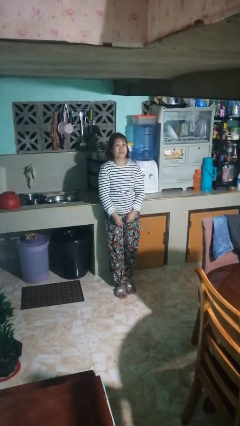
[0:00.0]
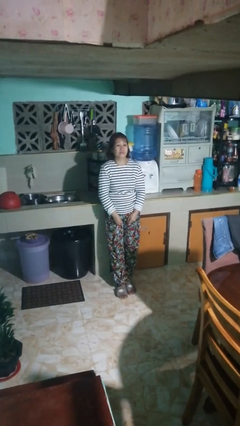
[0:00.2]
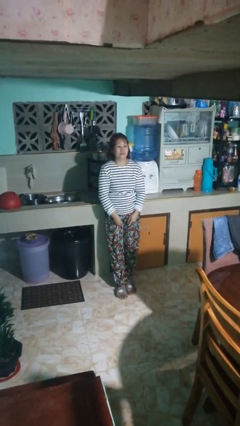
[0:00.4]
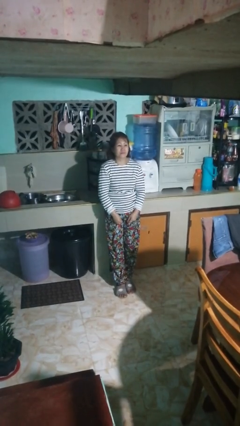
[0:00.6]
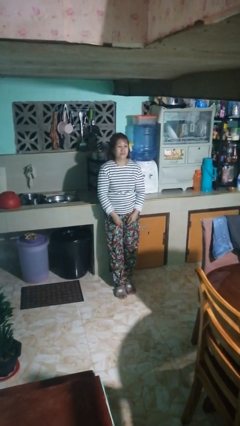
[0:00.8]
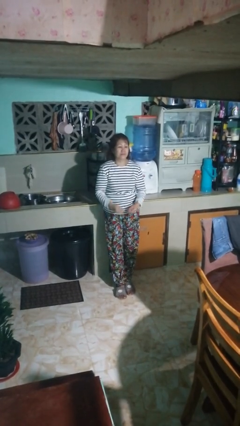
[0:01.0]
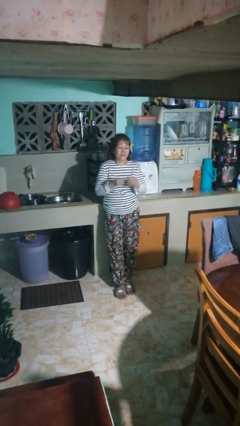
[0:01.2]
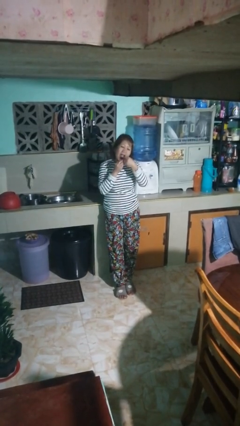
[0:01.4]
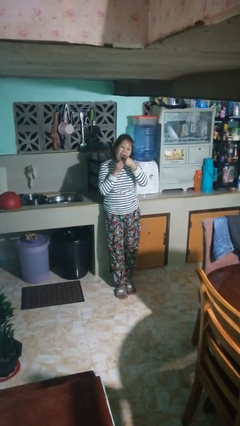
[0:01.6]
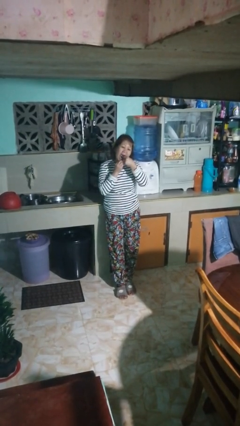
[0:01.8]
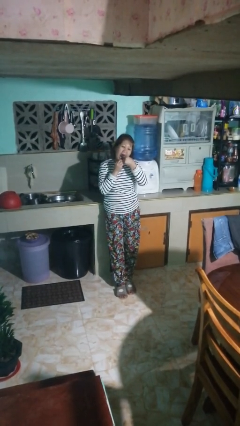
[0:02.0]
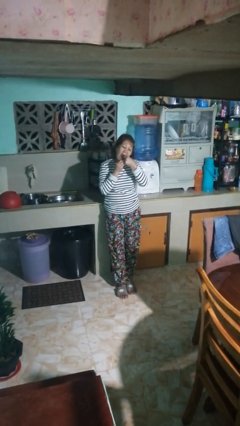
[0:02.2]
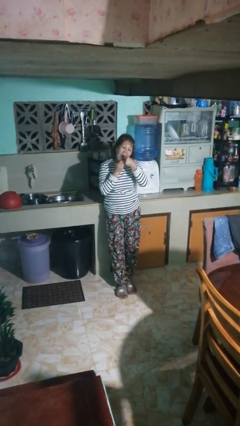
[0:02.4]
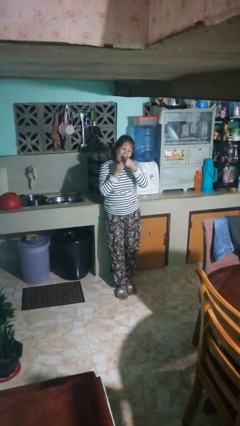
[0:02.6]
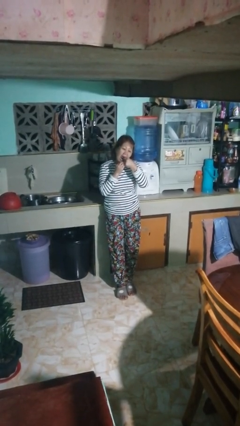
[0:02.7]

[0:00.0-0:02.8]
person flosses

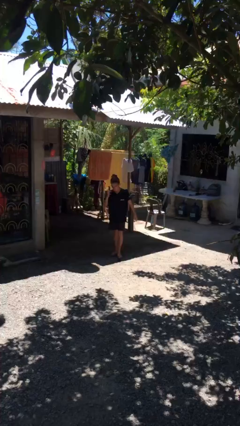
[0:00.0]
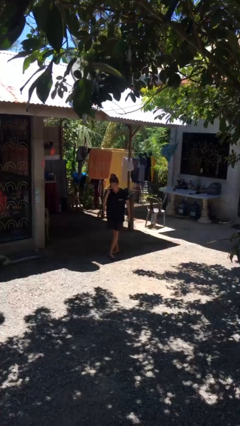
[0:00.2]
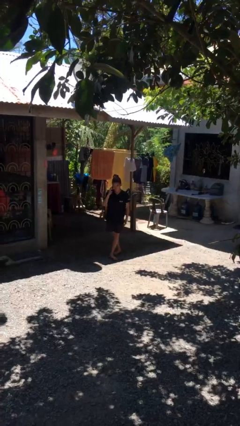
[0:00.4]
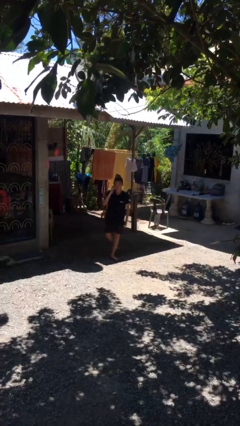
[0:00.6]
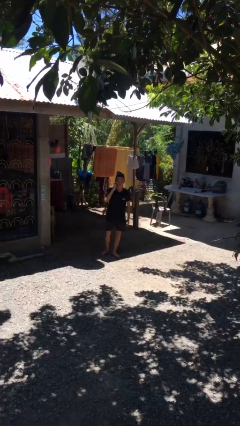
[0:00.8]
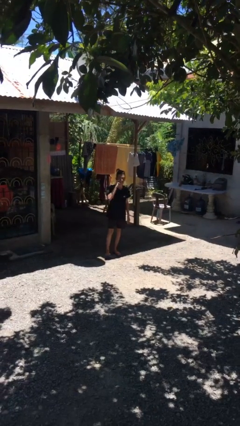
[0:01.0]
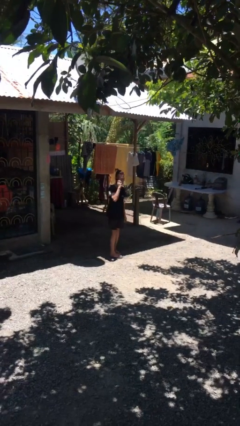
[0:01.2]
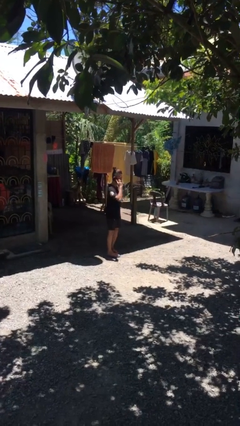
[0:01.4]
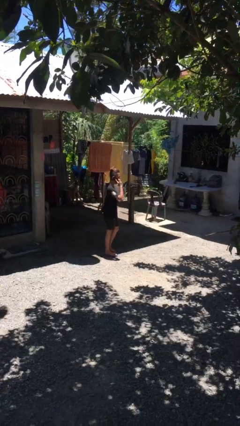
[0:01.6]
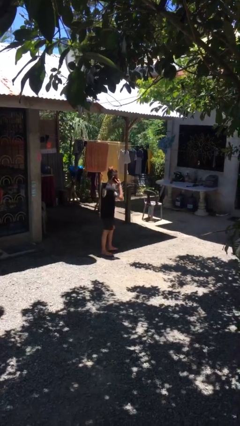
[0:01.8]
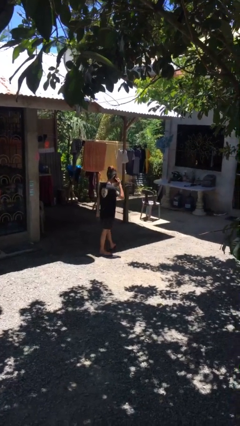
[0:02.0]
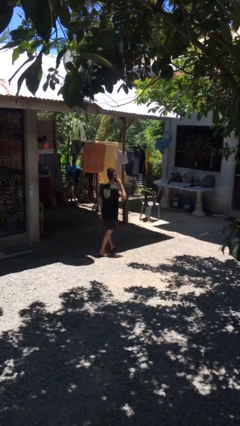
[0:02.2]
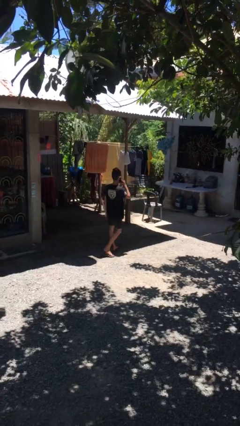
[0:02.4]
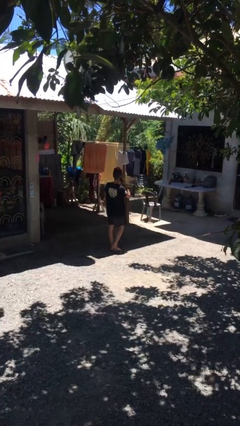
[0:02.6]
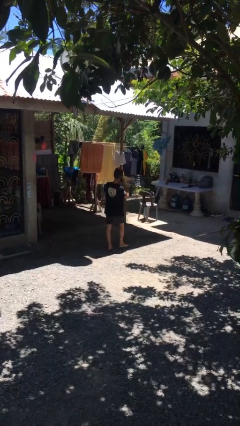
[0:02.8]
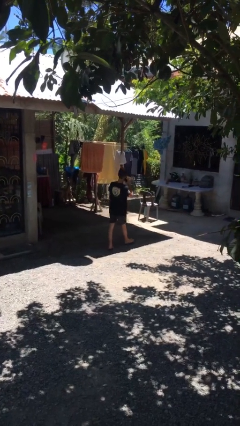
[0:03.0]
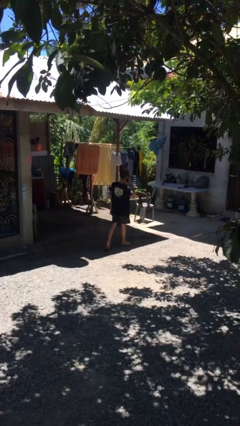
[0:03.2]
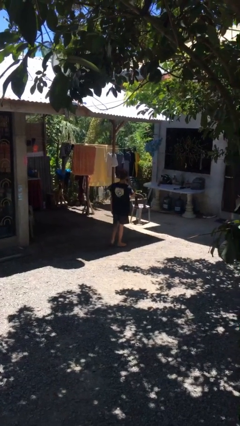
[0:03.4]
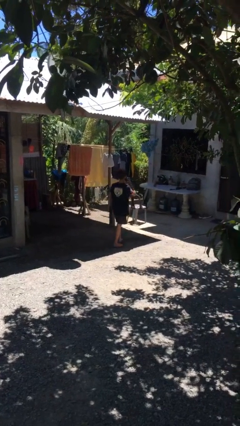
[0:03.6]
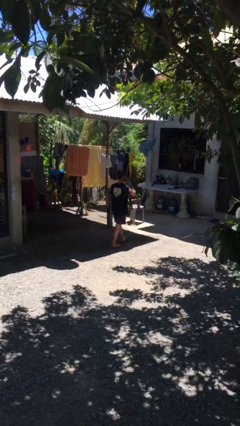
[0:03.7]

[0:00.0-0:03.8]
person talks on phone

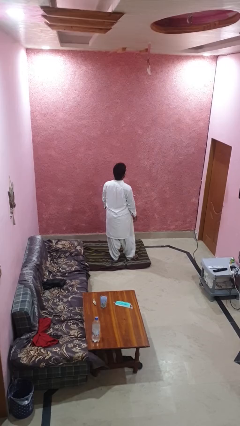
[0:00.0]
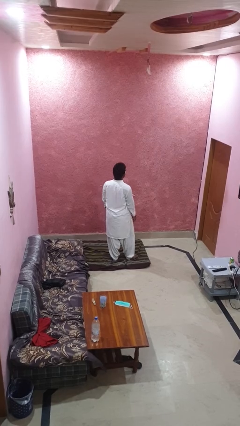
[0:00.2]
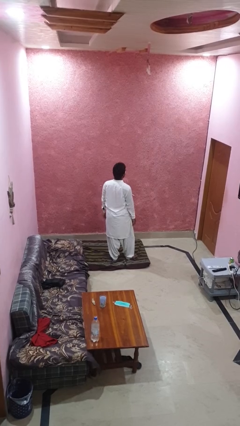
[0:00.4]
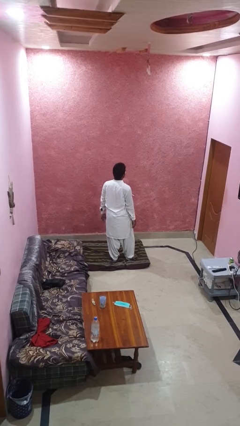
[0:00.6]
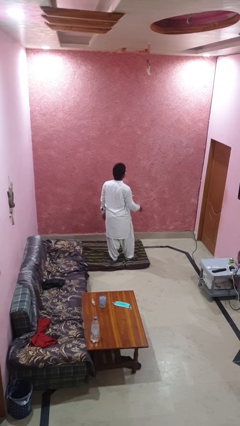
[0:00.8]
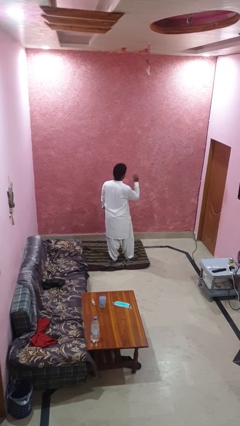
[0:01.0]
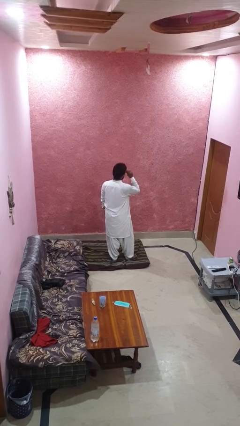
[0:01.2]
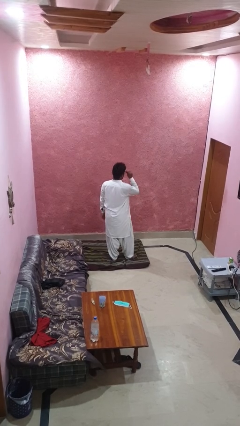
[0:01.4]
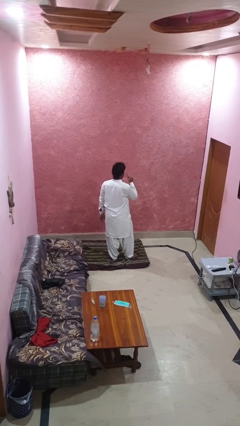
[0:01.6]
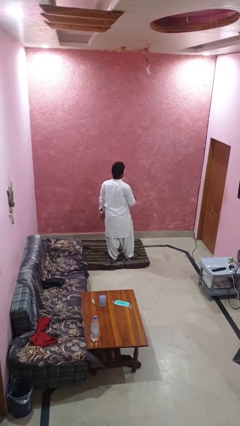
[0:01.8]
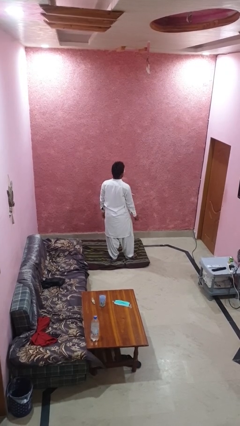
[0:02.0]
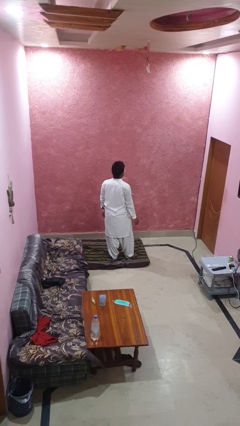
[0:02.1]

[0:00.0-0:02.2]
person takes off glasses

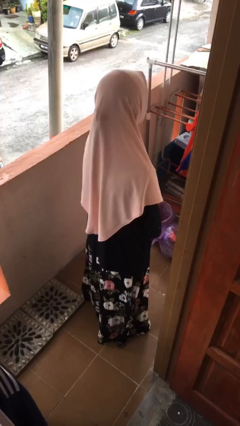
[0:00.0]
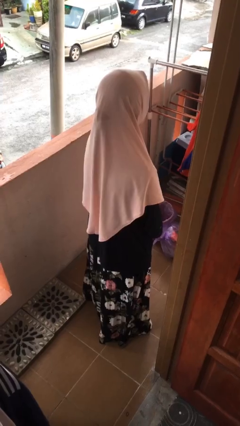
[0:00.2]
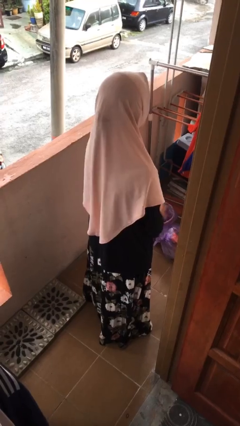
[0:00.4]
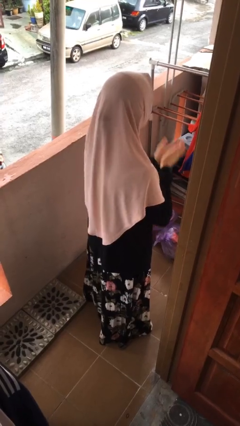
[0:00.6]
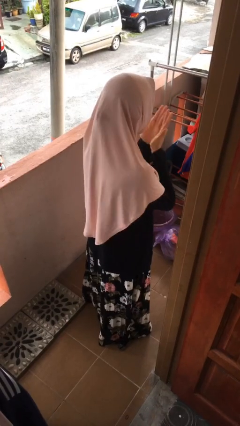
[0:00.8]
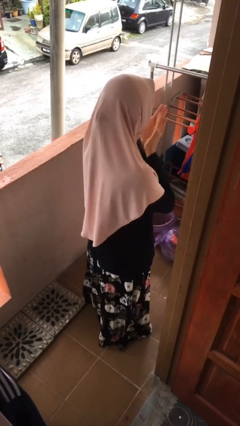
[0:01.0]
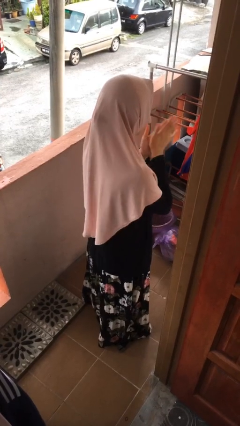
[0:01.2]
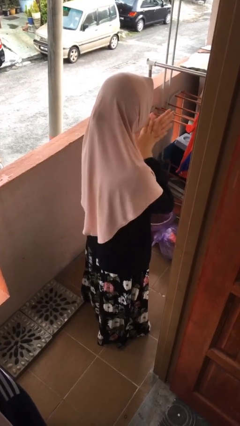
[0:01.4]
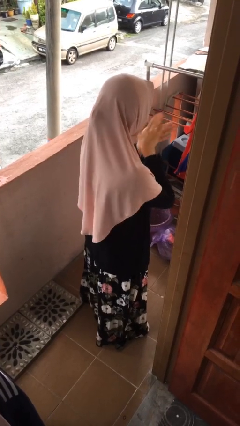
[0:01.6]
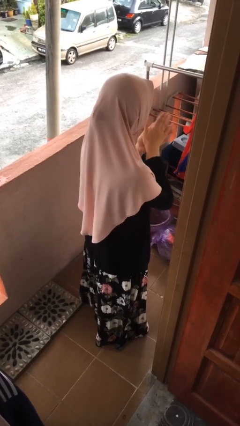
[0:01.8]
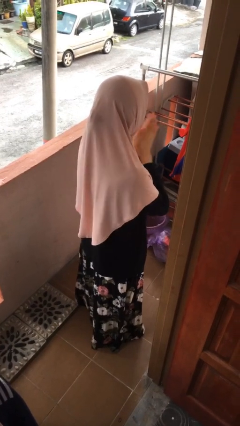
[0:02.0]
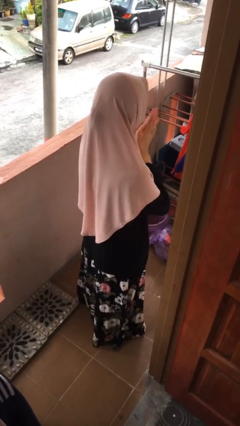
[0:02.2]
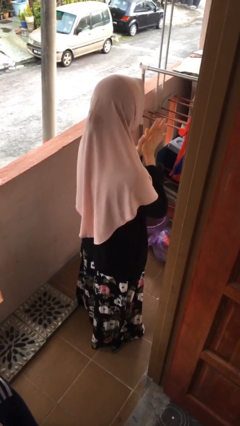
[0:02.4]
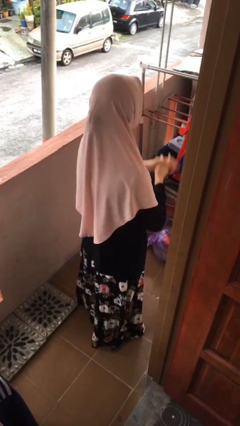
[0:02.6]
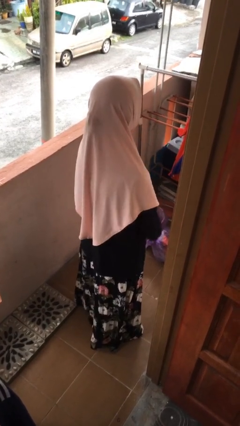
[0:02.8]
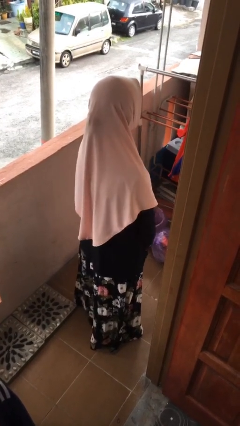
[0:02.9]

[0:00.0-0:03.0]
person blows into hands

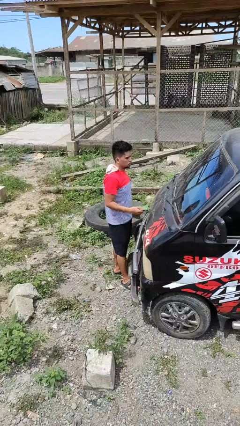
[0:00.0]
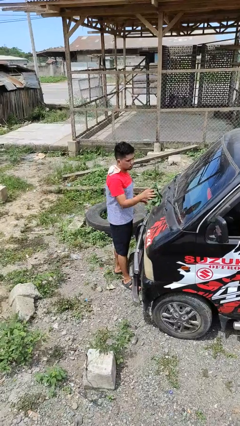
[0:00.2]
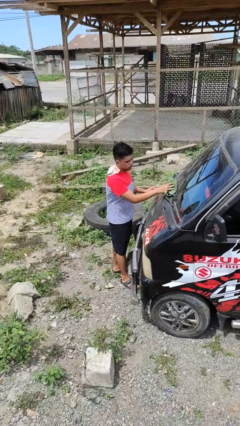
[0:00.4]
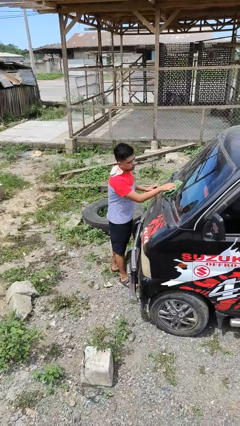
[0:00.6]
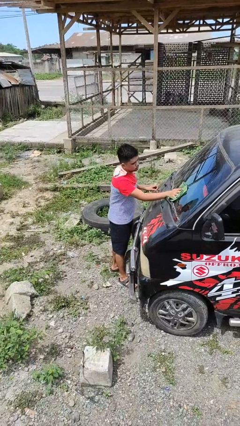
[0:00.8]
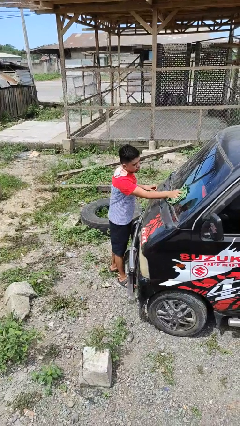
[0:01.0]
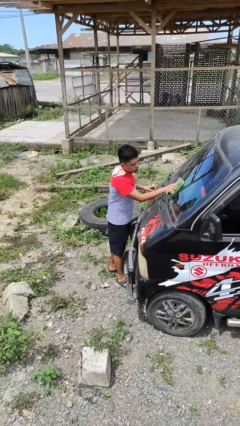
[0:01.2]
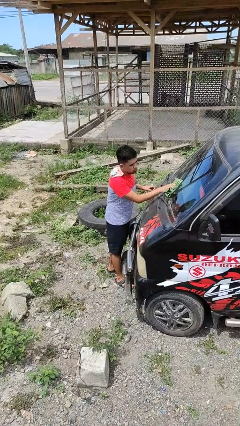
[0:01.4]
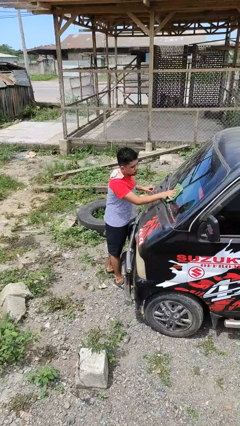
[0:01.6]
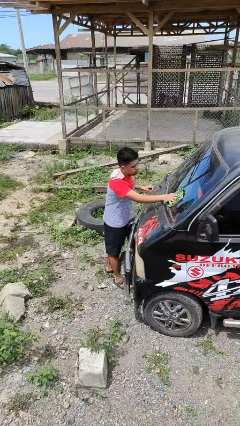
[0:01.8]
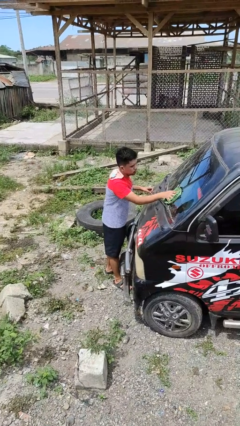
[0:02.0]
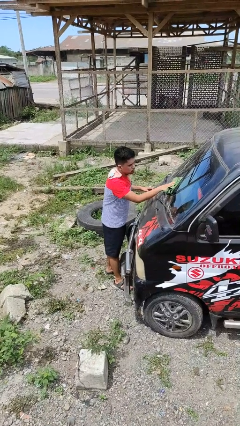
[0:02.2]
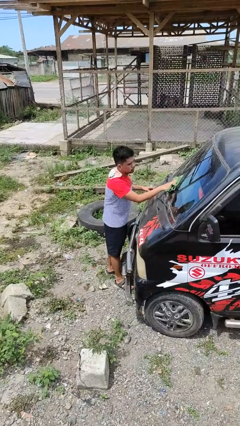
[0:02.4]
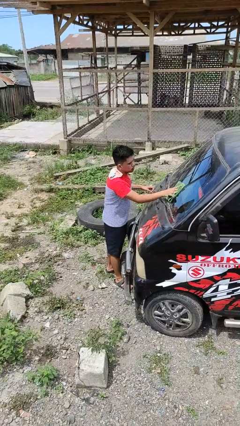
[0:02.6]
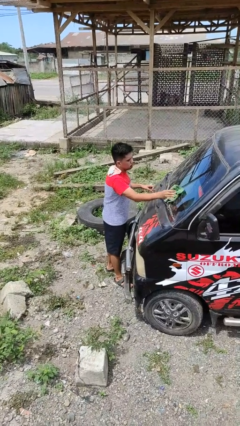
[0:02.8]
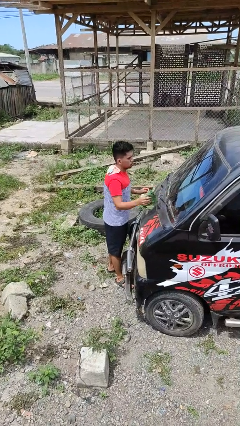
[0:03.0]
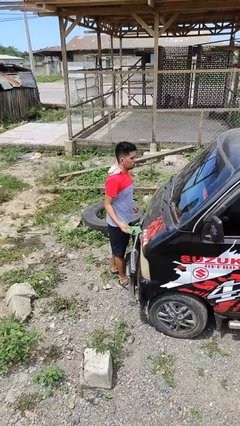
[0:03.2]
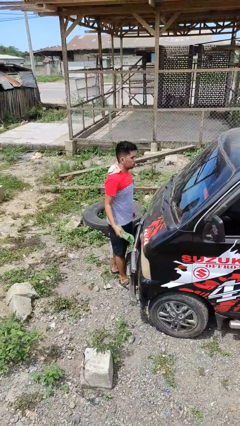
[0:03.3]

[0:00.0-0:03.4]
person polishes car with rag

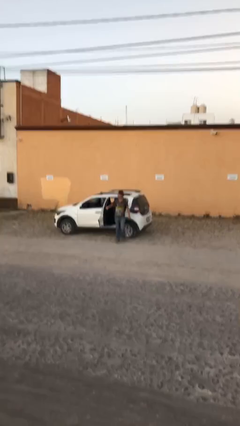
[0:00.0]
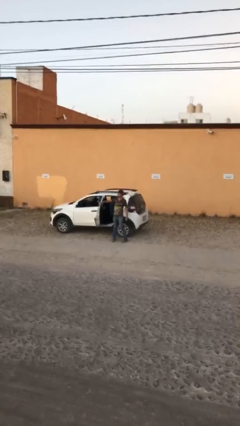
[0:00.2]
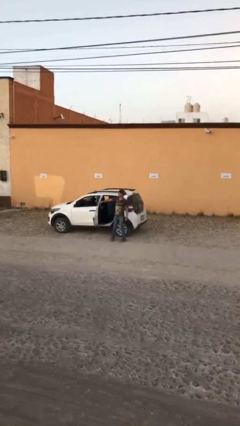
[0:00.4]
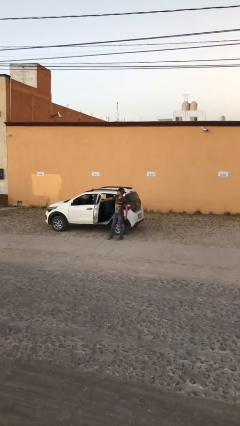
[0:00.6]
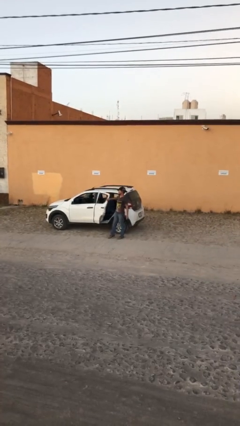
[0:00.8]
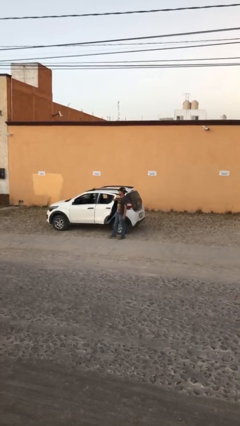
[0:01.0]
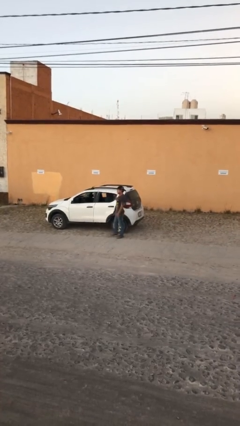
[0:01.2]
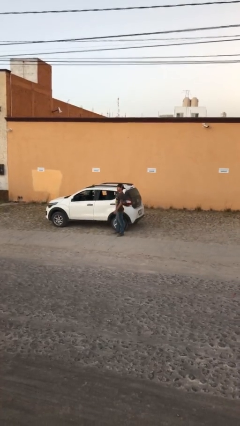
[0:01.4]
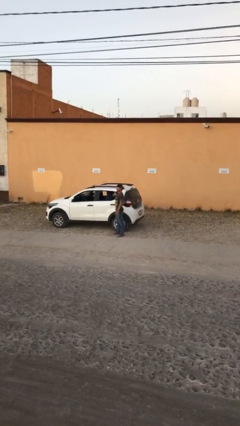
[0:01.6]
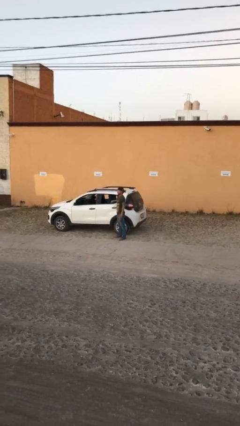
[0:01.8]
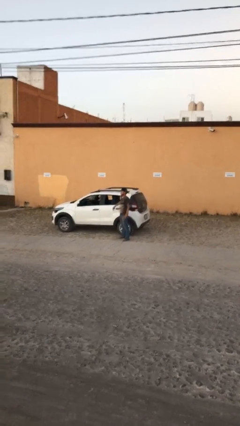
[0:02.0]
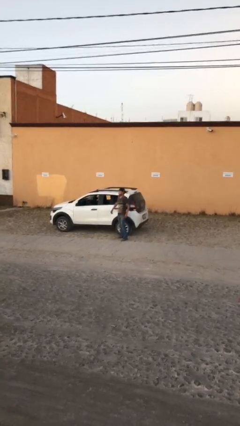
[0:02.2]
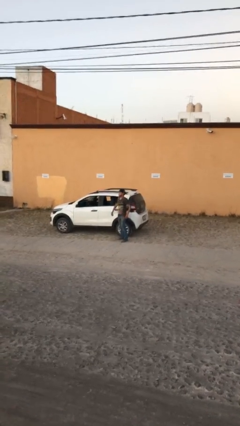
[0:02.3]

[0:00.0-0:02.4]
person closes car door
